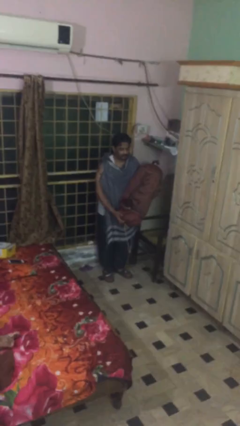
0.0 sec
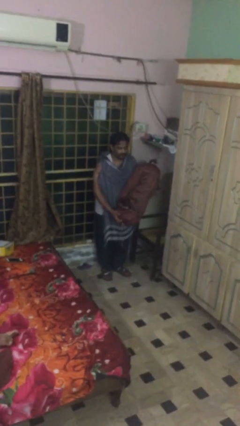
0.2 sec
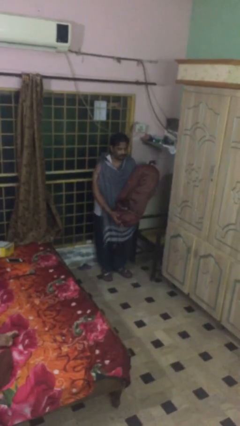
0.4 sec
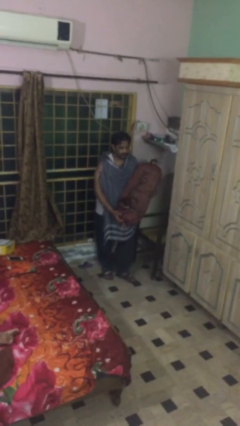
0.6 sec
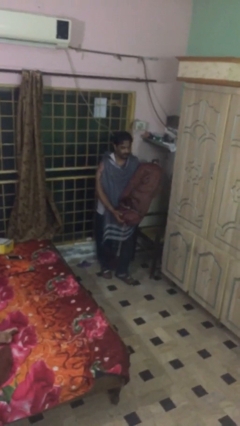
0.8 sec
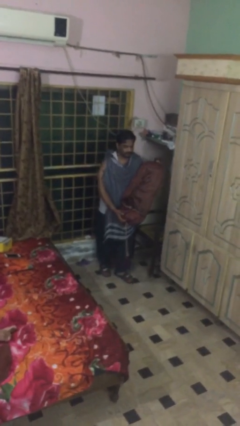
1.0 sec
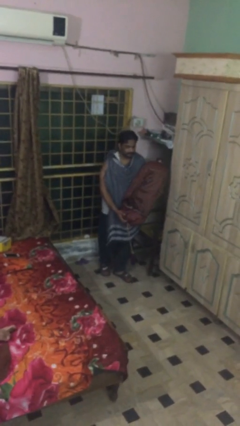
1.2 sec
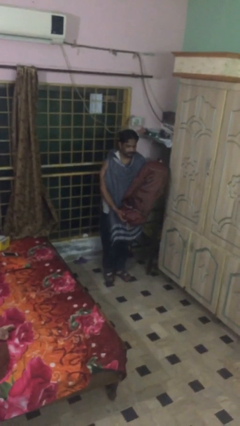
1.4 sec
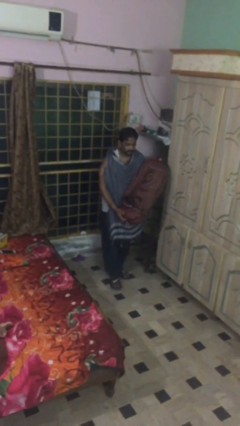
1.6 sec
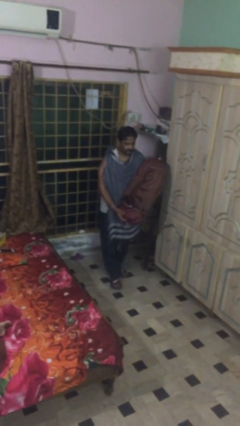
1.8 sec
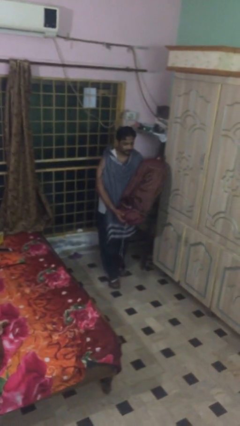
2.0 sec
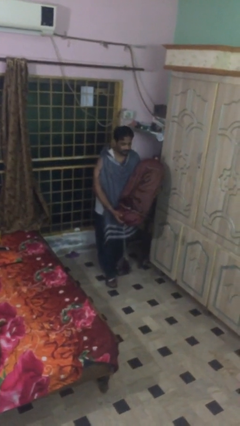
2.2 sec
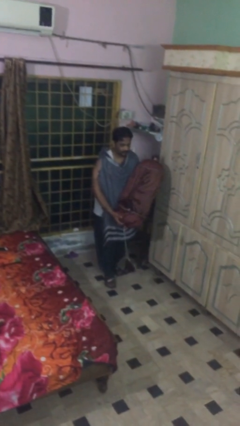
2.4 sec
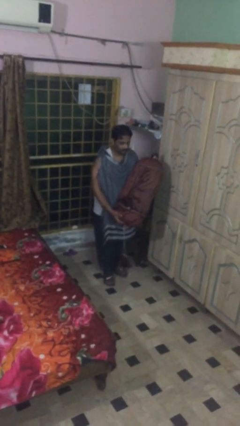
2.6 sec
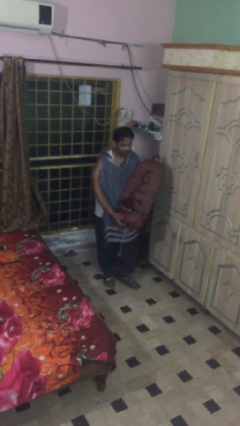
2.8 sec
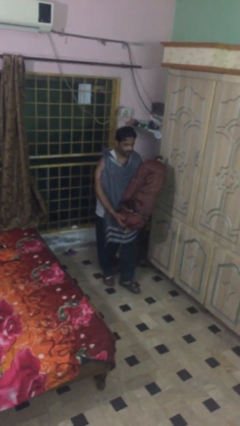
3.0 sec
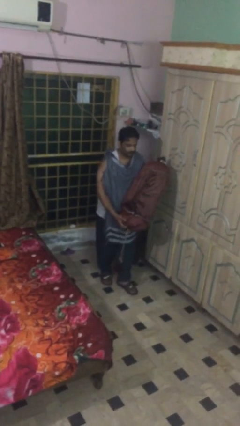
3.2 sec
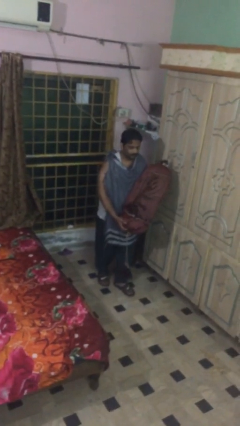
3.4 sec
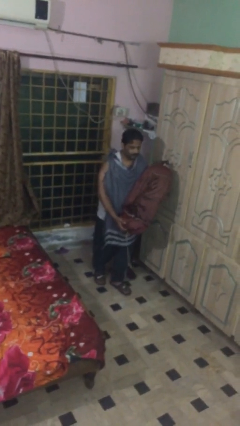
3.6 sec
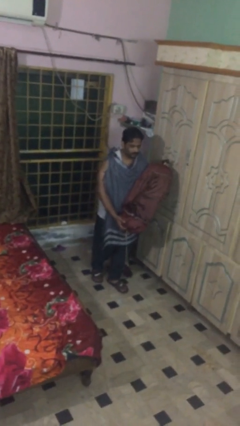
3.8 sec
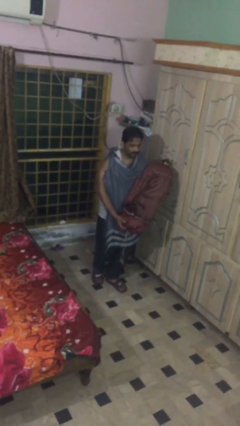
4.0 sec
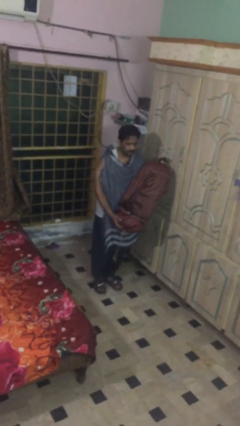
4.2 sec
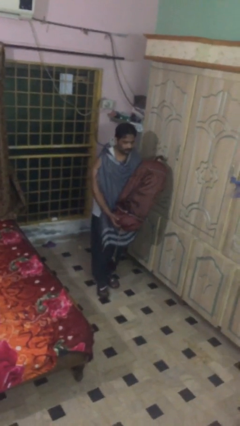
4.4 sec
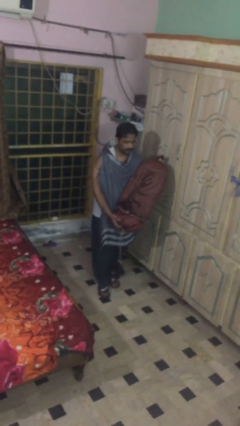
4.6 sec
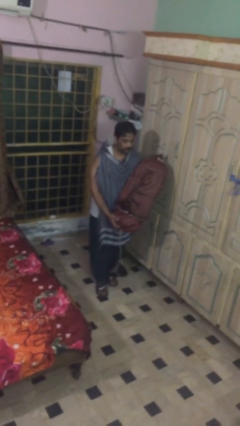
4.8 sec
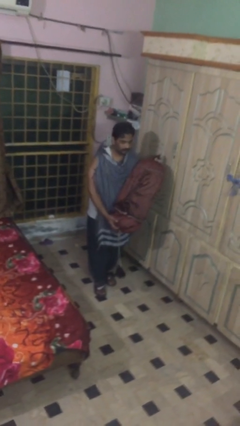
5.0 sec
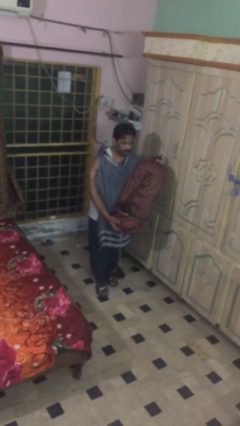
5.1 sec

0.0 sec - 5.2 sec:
person carries heavy object

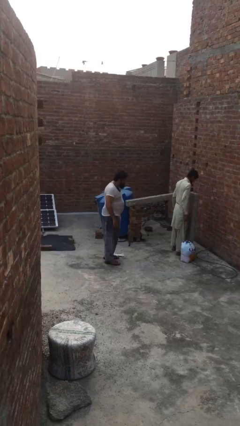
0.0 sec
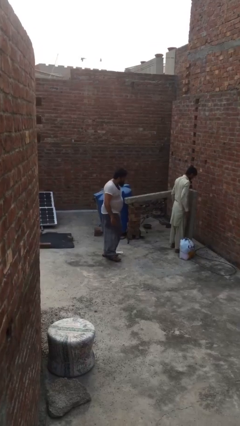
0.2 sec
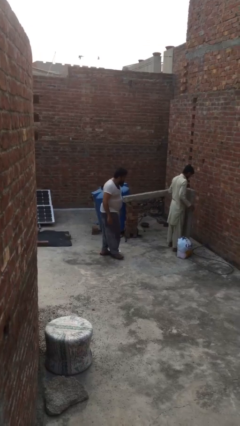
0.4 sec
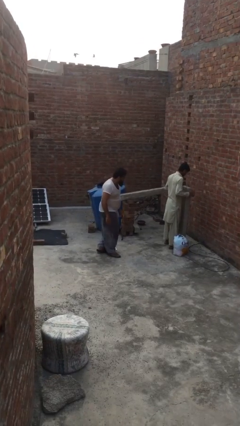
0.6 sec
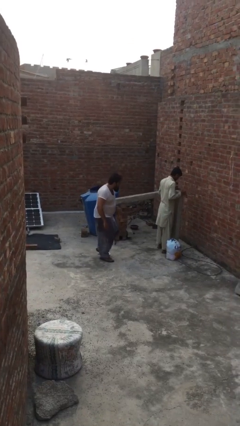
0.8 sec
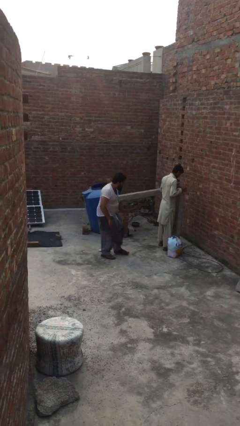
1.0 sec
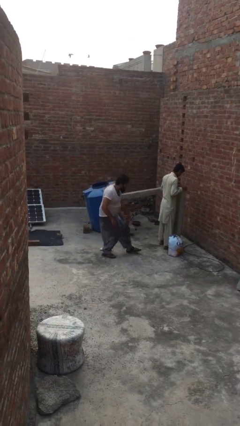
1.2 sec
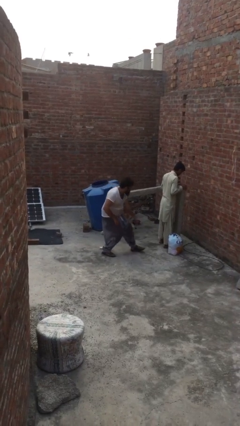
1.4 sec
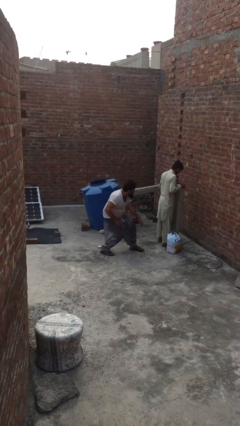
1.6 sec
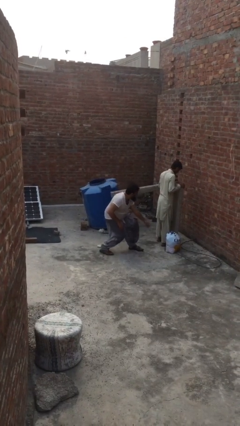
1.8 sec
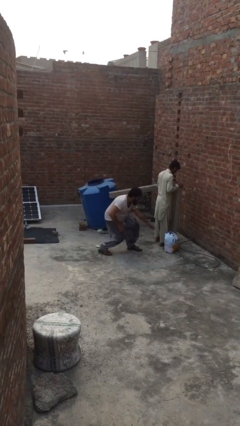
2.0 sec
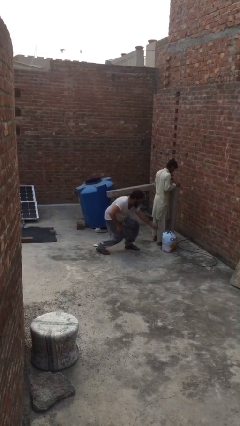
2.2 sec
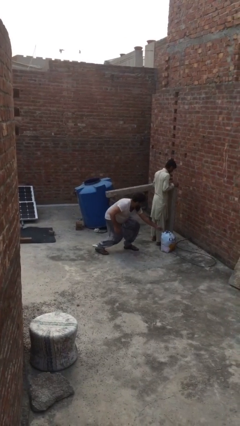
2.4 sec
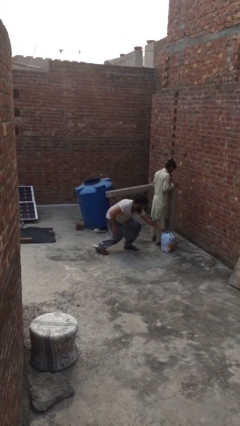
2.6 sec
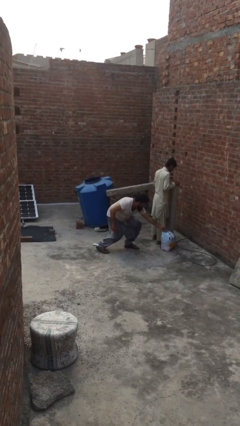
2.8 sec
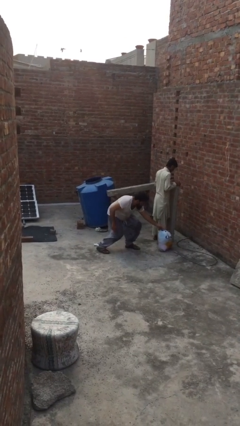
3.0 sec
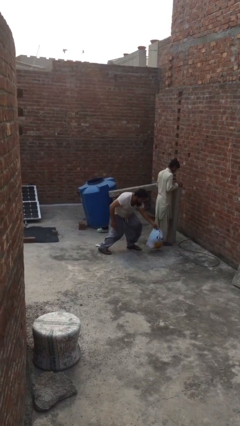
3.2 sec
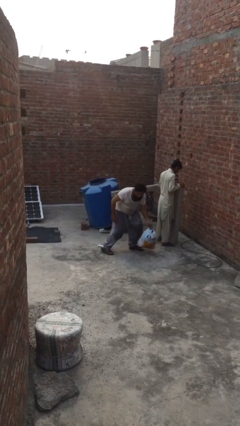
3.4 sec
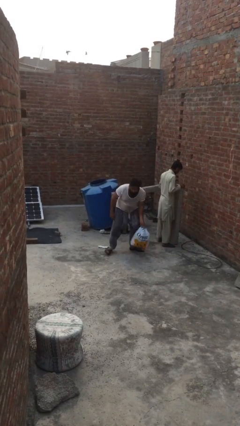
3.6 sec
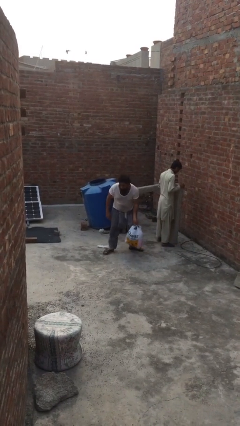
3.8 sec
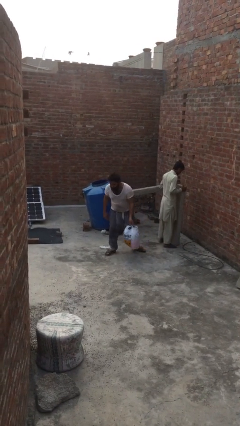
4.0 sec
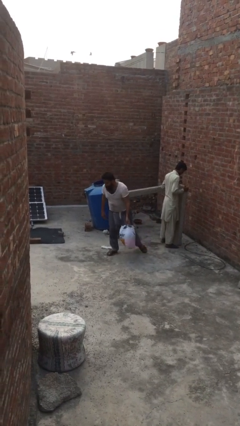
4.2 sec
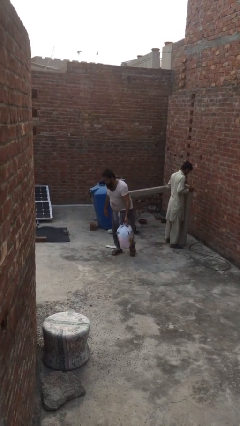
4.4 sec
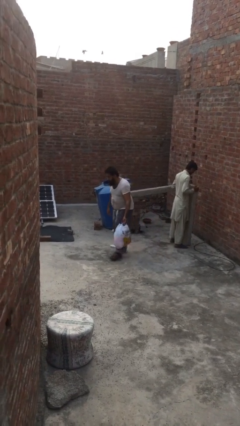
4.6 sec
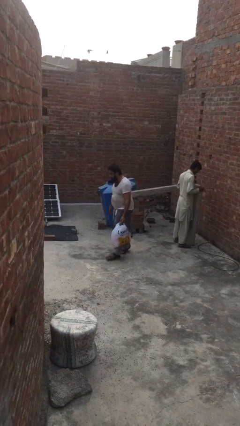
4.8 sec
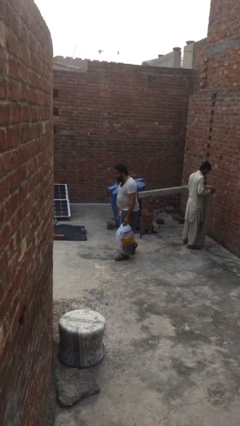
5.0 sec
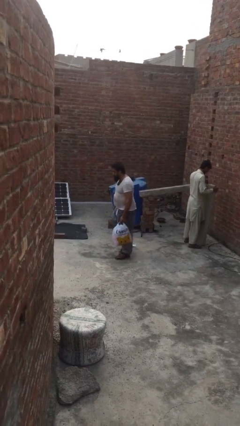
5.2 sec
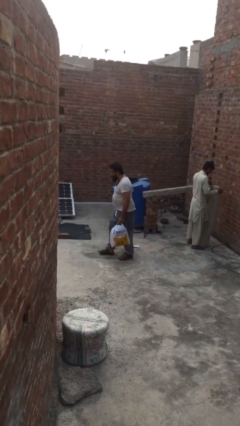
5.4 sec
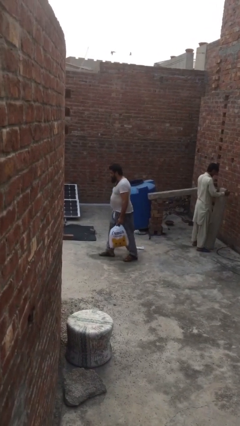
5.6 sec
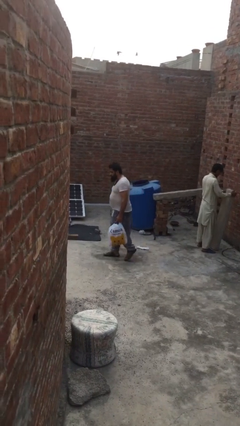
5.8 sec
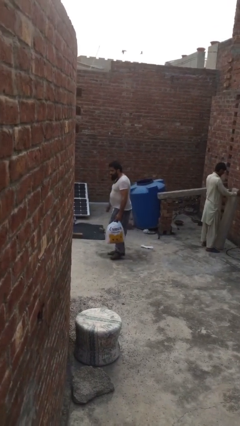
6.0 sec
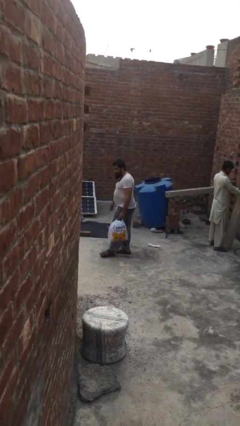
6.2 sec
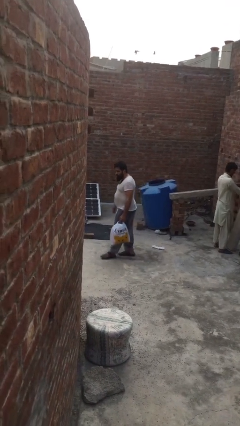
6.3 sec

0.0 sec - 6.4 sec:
person steals object from person

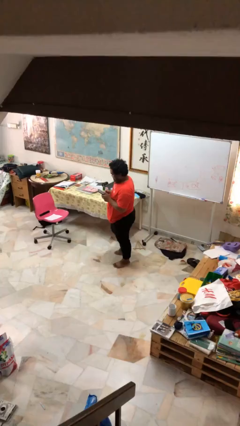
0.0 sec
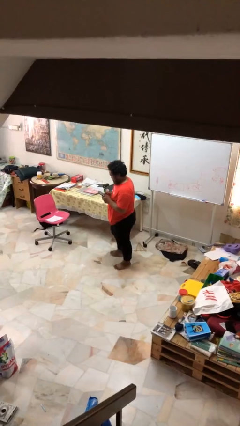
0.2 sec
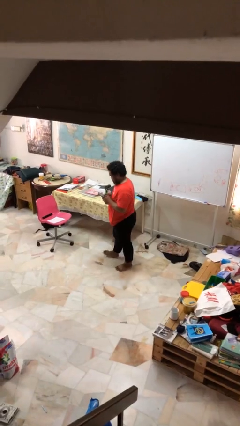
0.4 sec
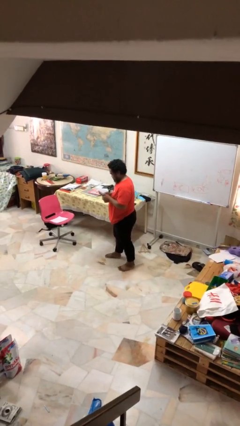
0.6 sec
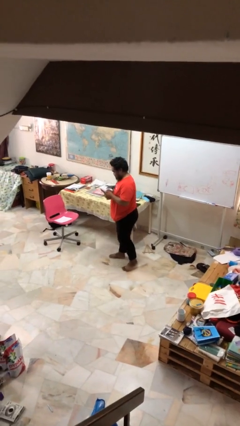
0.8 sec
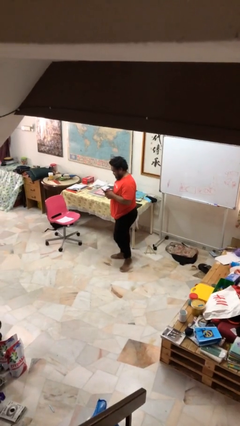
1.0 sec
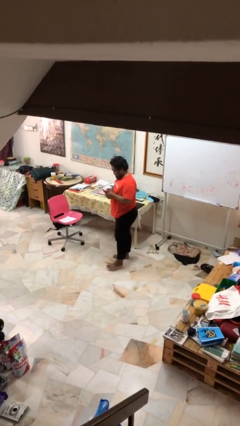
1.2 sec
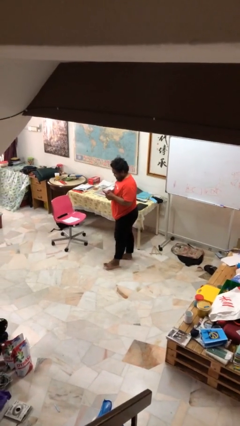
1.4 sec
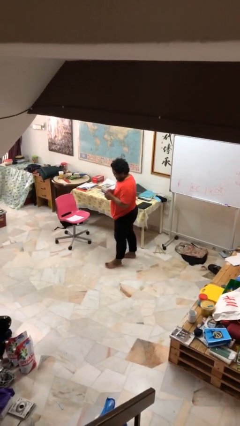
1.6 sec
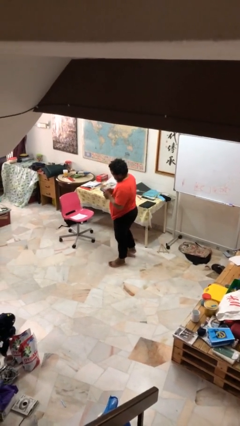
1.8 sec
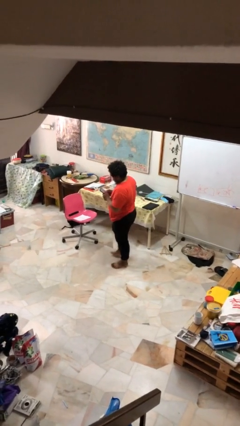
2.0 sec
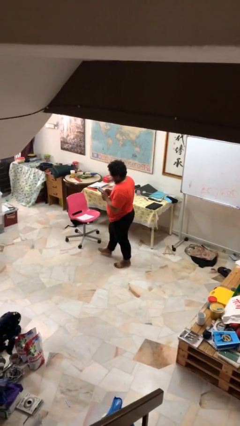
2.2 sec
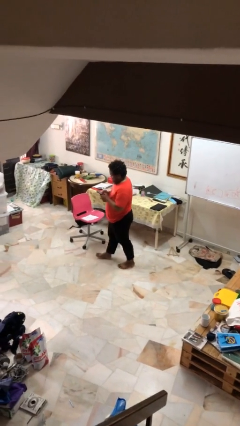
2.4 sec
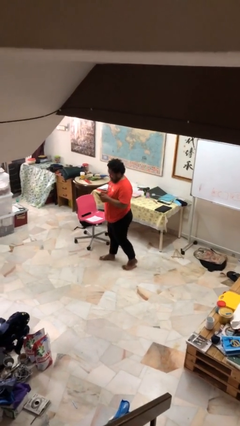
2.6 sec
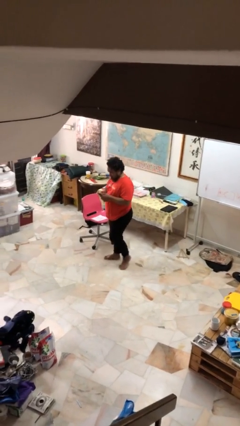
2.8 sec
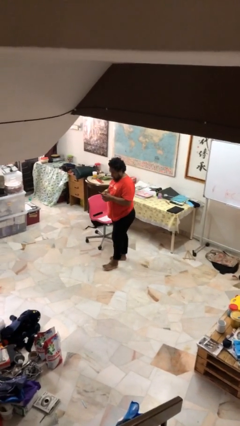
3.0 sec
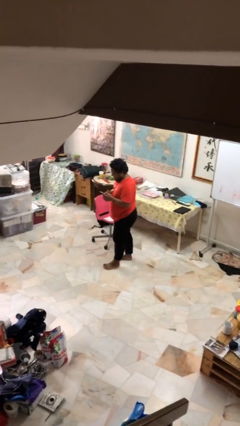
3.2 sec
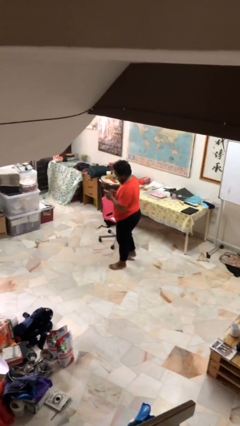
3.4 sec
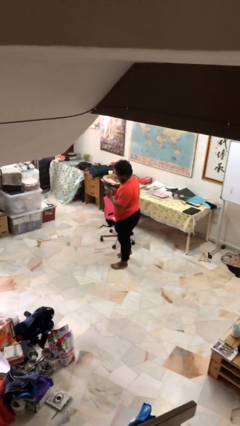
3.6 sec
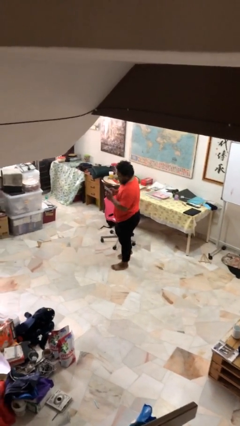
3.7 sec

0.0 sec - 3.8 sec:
person texts on phone

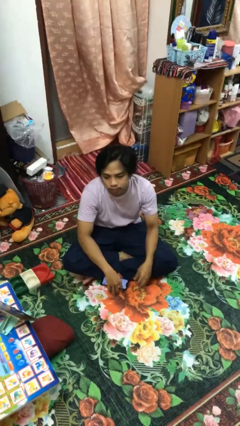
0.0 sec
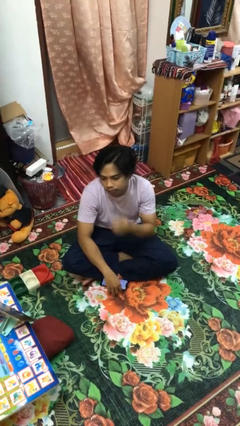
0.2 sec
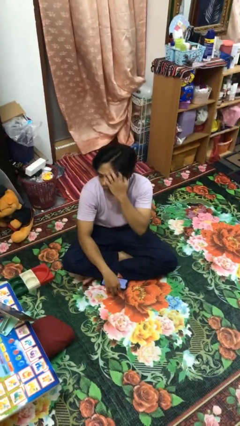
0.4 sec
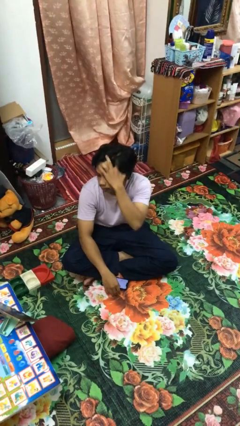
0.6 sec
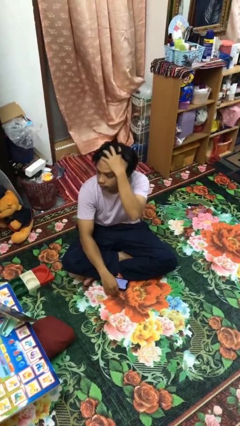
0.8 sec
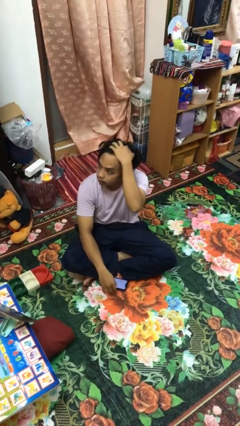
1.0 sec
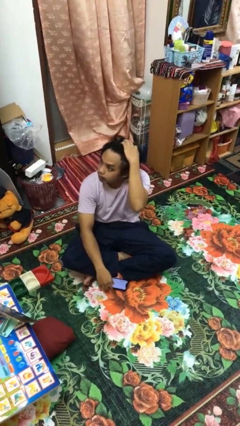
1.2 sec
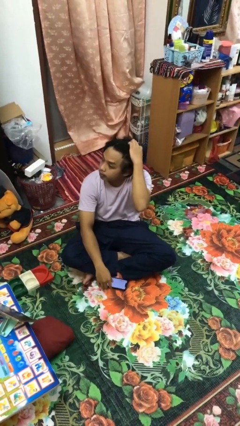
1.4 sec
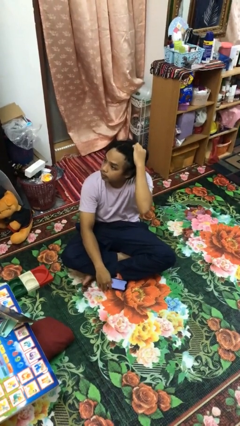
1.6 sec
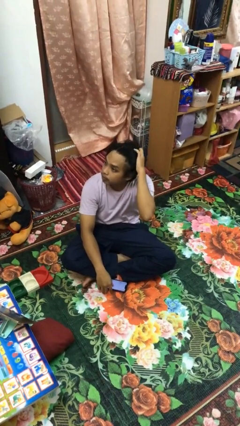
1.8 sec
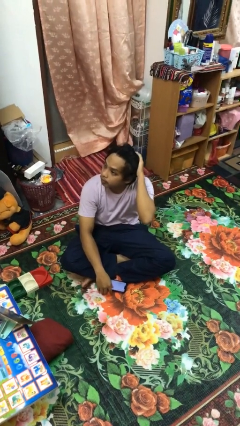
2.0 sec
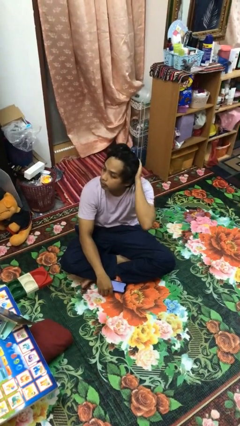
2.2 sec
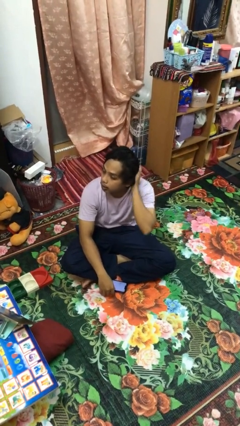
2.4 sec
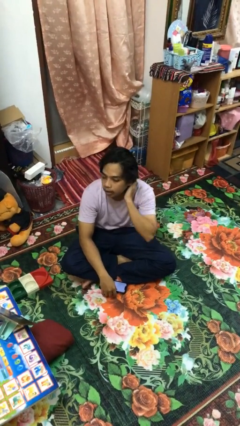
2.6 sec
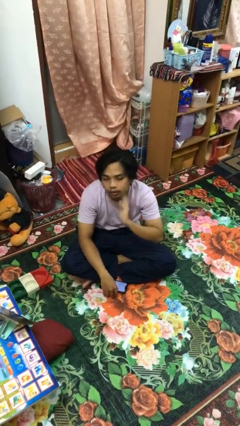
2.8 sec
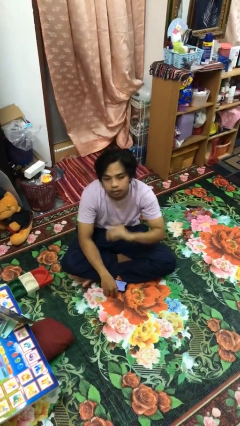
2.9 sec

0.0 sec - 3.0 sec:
person strokes hair
